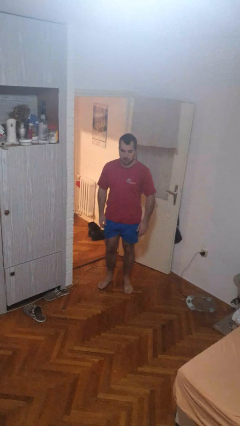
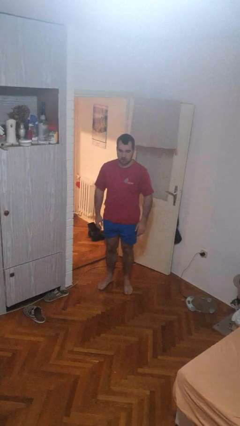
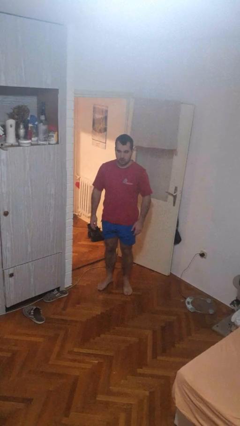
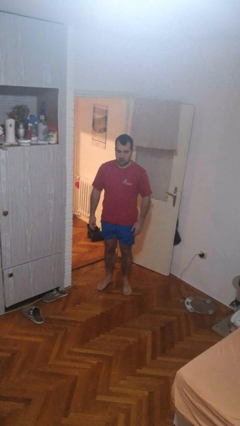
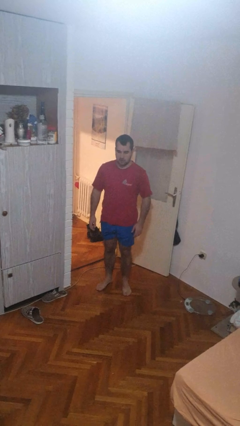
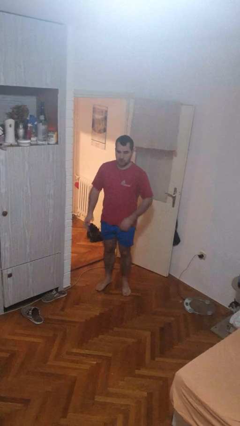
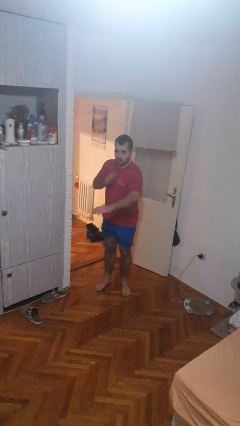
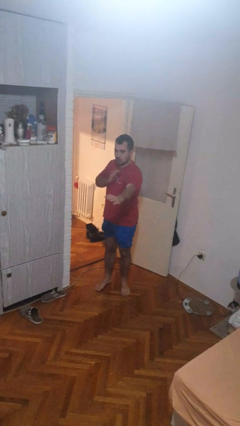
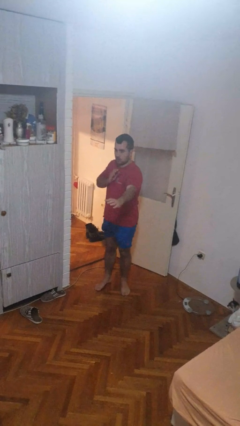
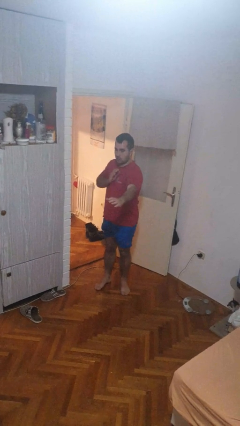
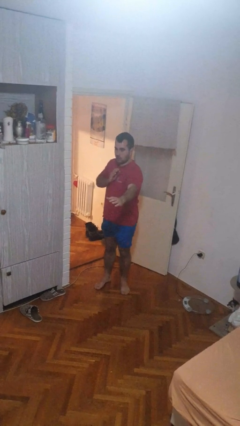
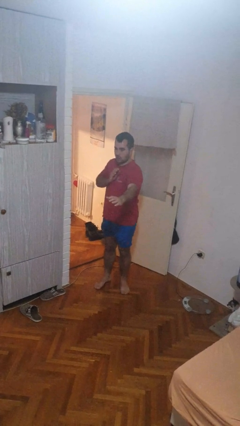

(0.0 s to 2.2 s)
person karate chop

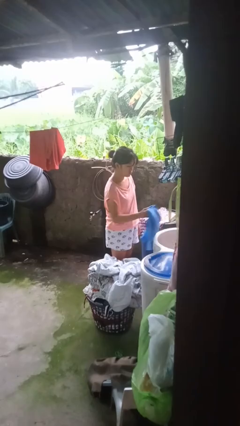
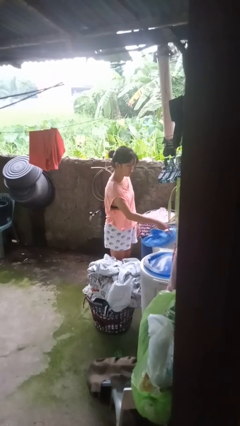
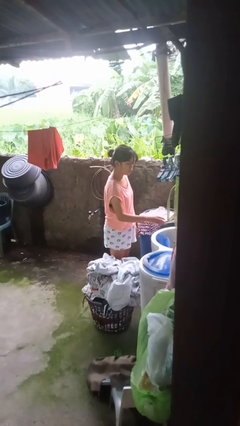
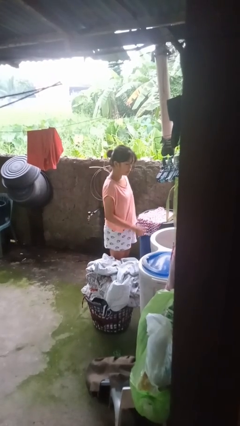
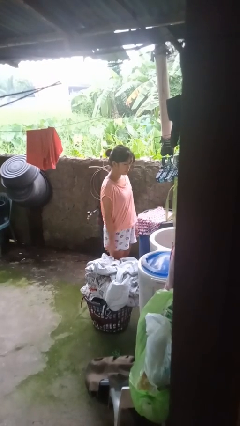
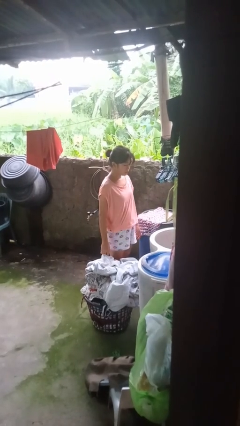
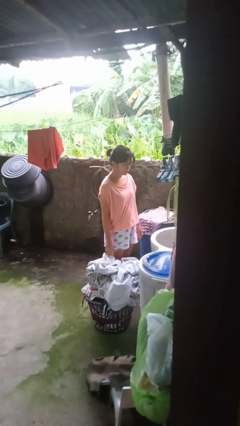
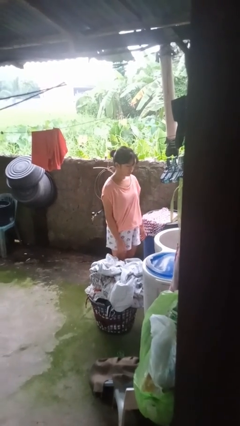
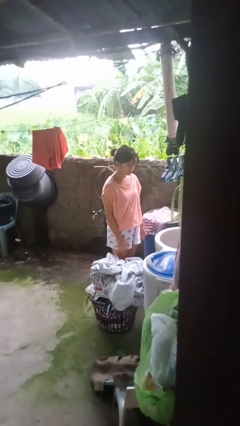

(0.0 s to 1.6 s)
person loads clotheswasher

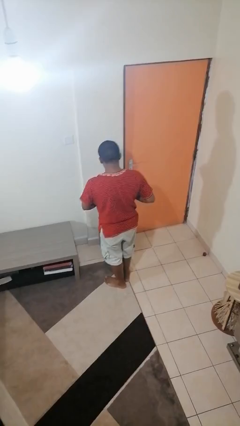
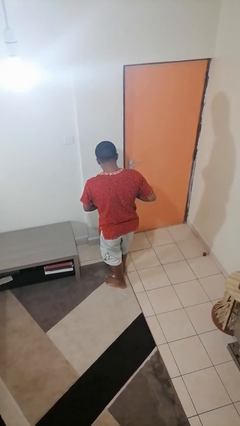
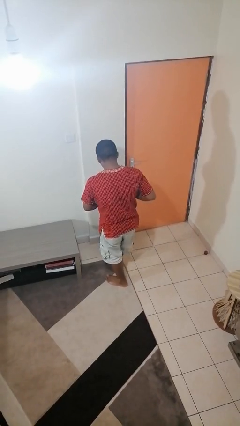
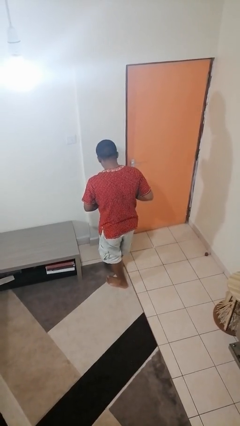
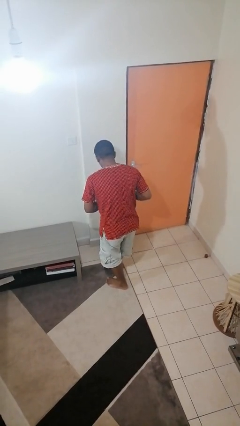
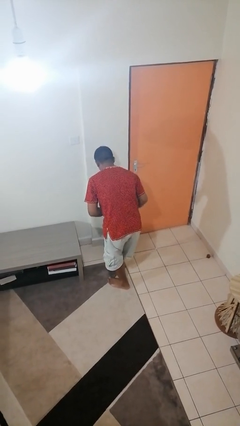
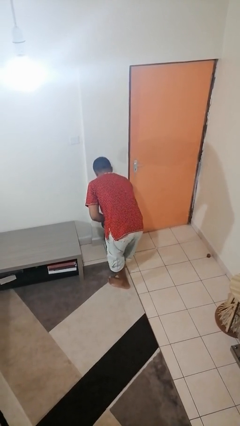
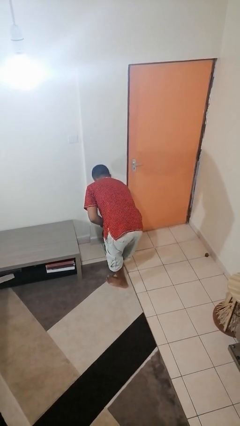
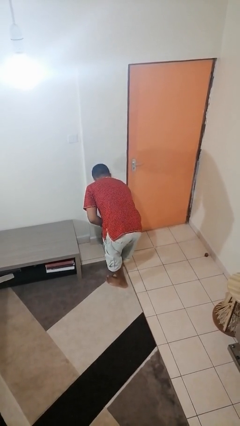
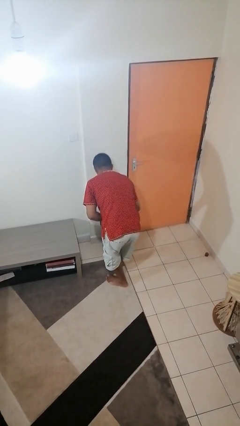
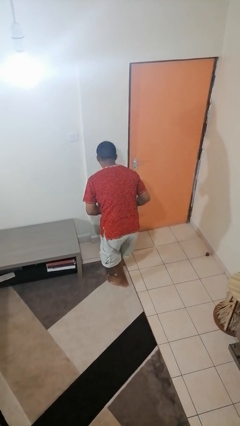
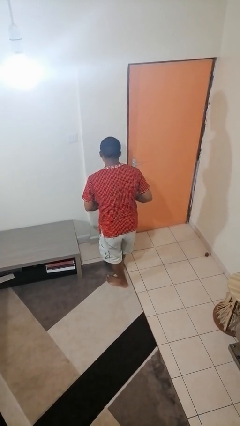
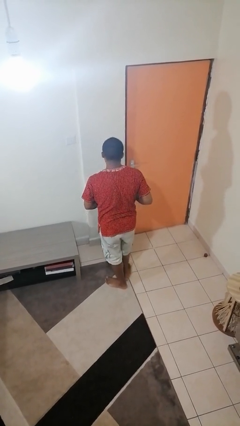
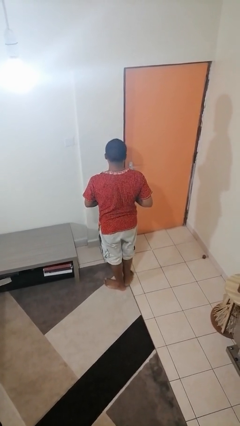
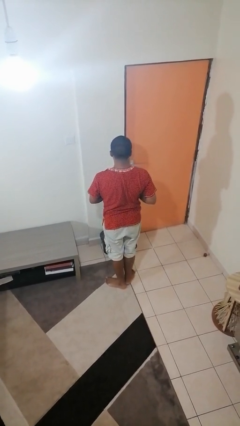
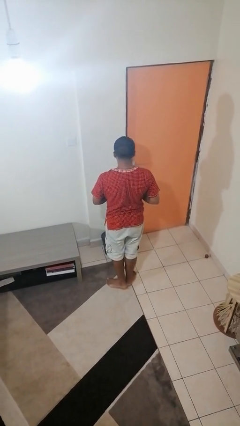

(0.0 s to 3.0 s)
person discards trash

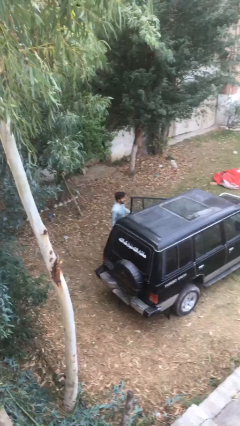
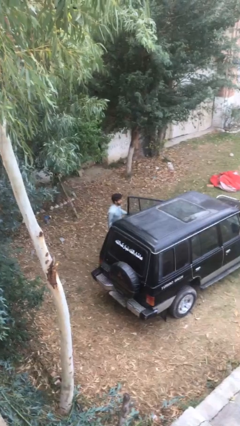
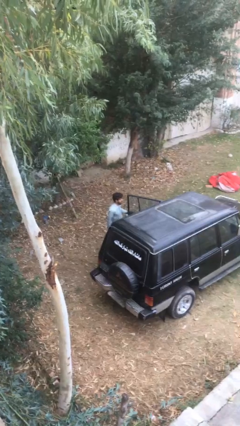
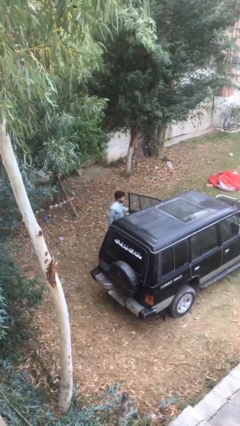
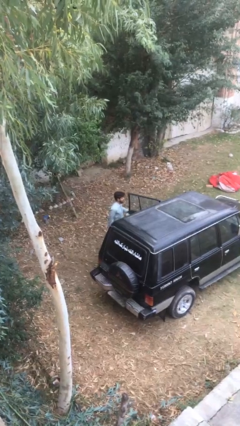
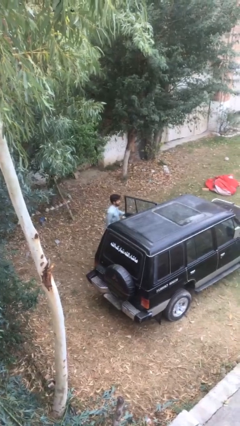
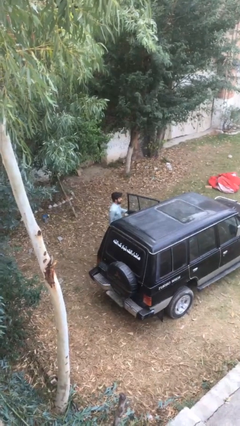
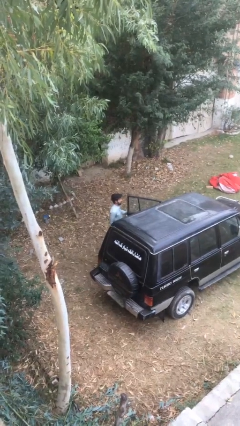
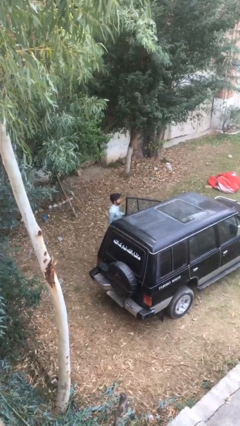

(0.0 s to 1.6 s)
person opens car door

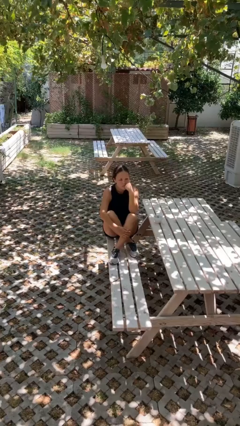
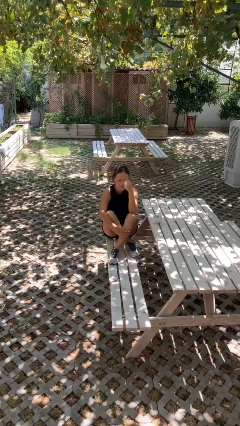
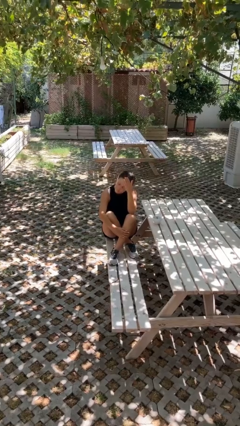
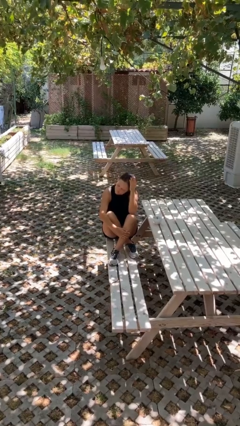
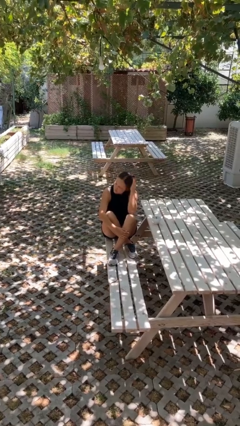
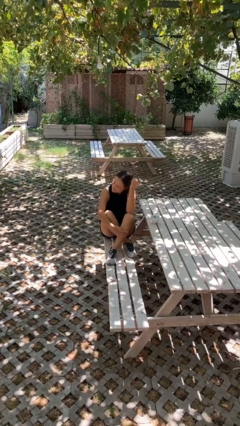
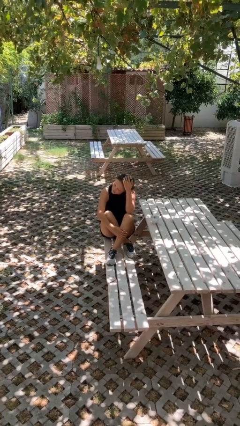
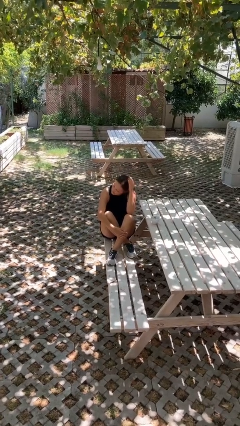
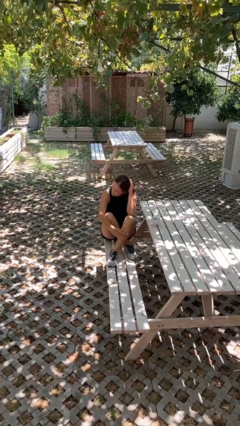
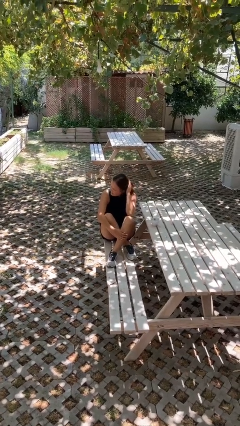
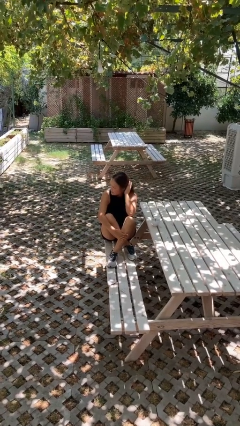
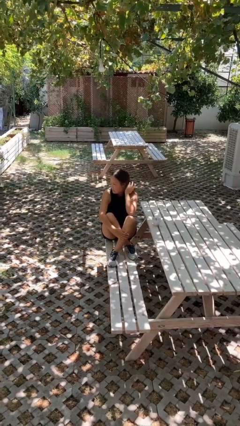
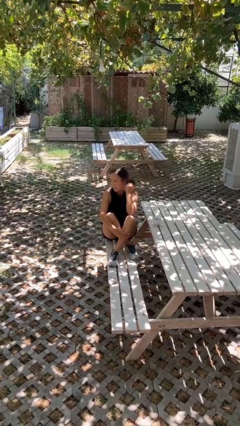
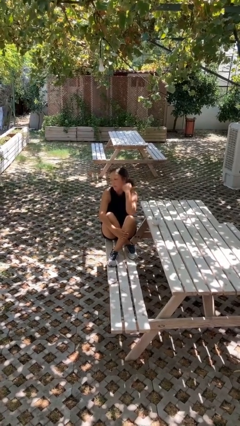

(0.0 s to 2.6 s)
person strokes hair

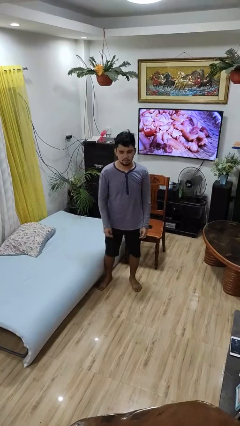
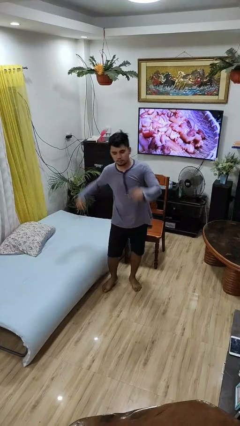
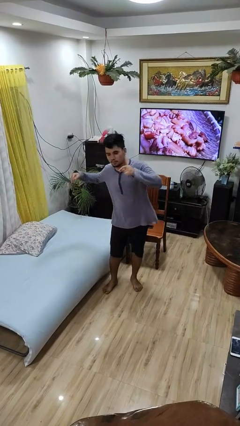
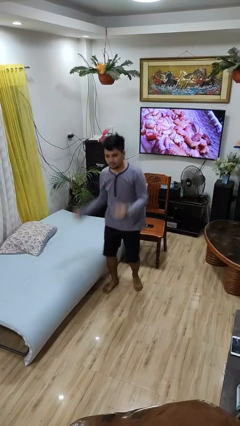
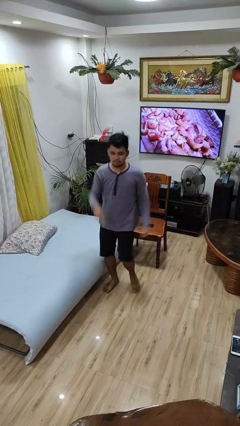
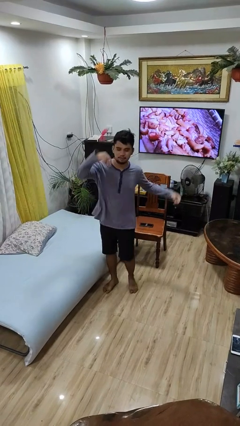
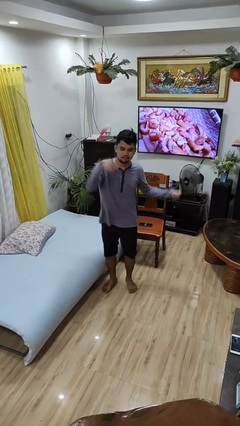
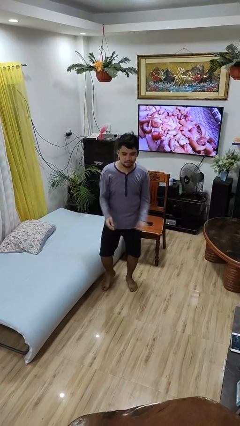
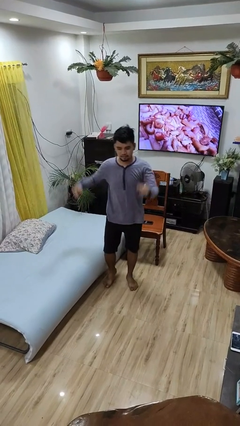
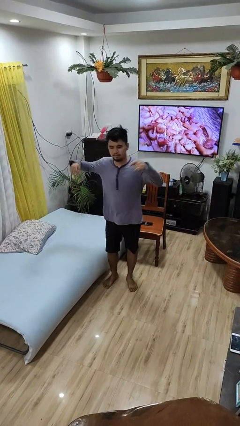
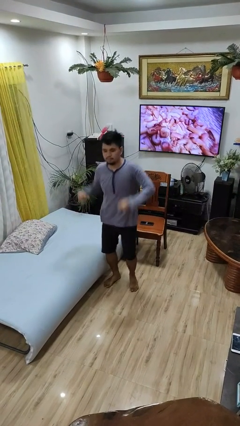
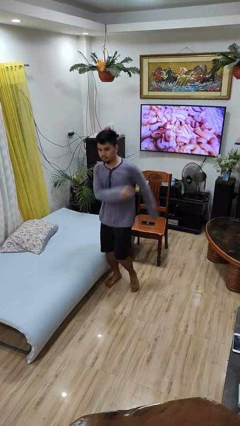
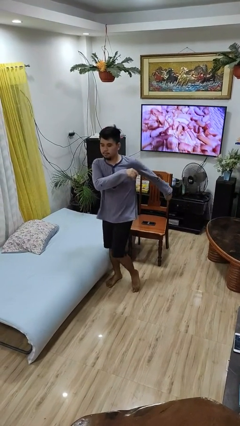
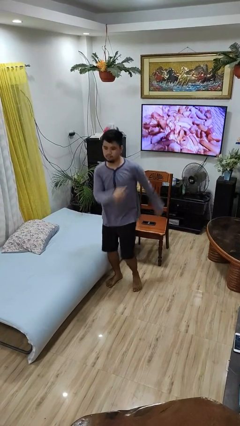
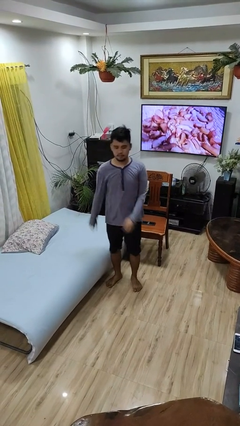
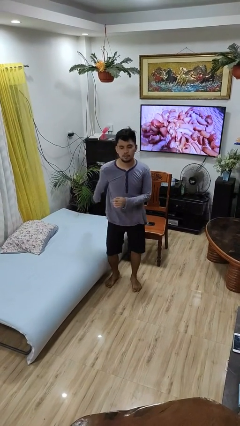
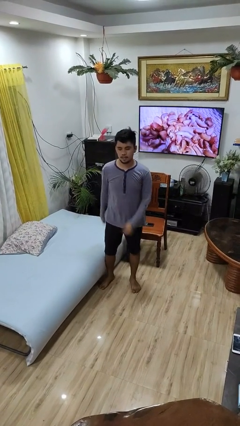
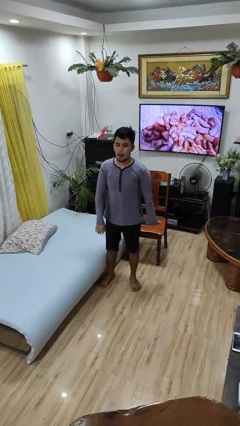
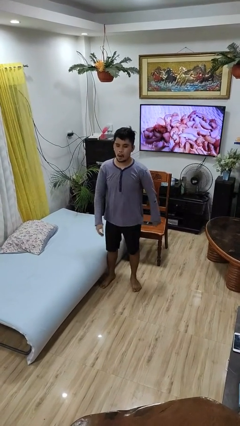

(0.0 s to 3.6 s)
person dances in place

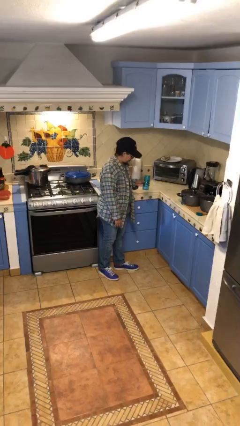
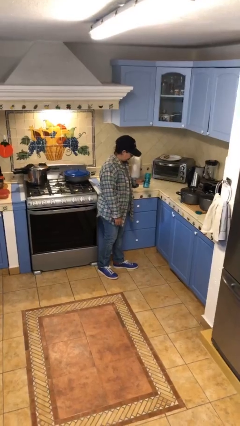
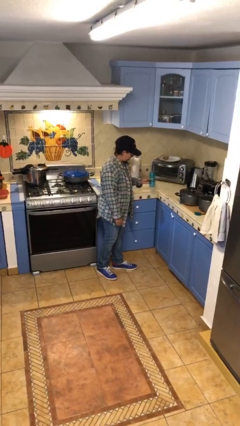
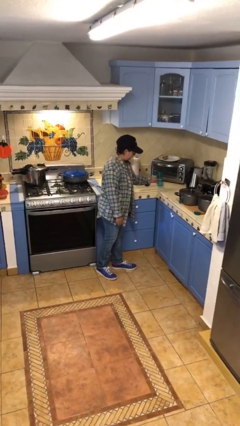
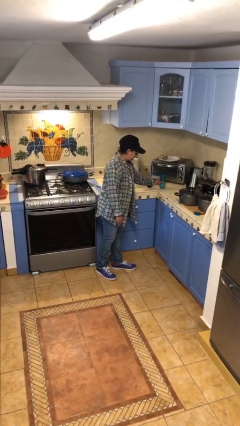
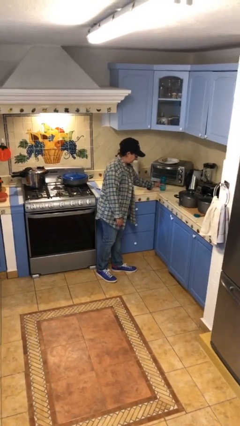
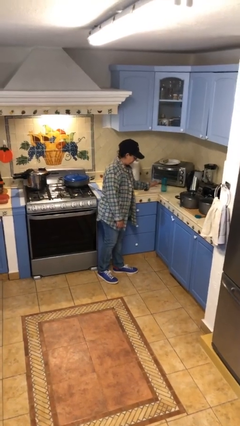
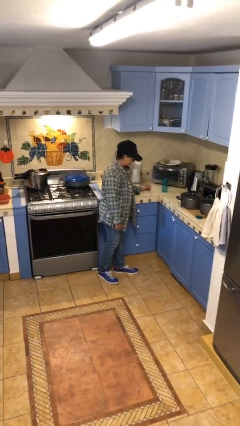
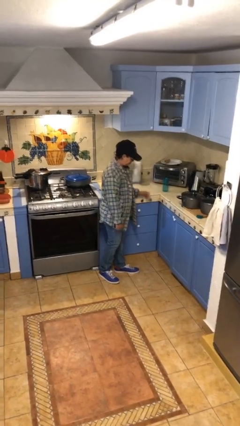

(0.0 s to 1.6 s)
person puts down object on countertop

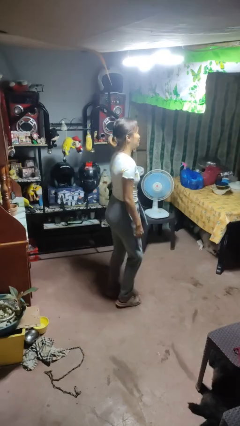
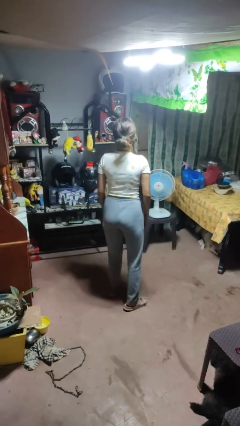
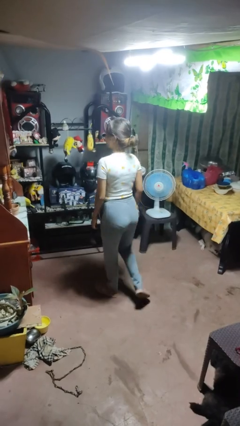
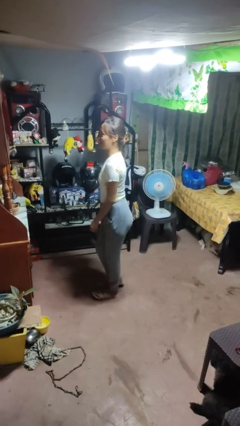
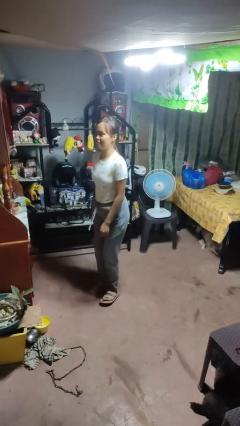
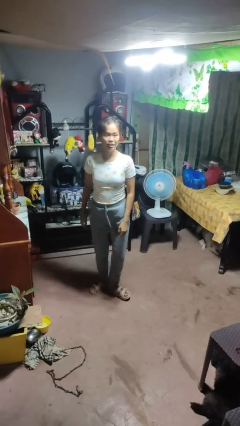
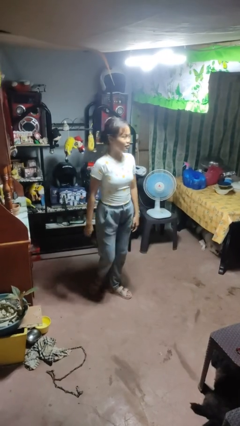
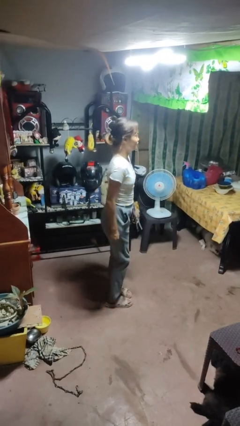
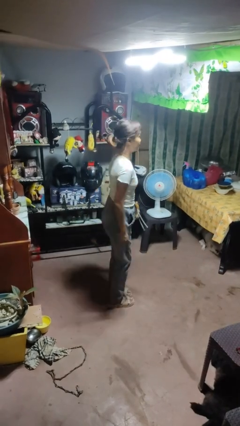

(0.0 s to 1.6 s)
person twirls
